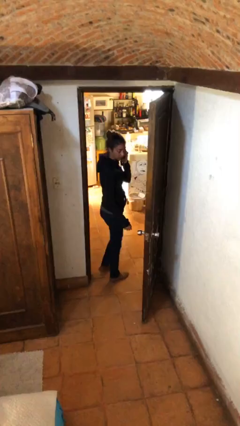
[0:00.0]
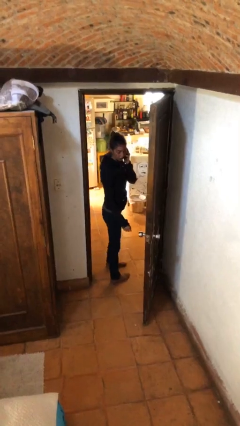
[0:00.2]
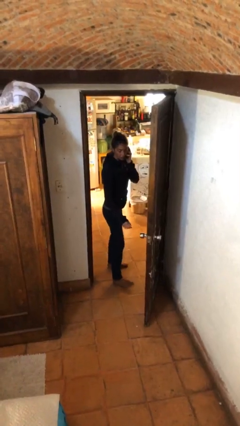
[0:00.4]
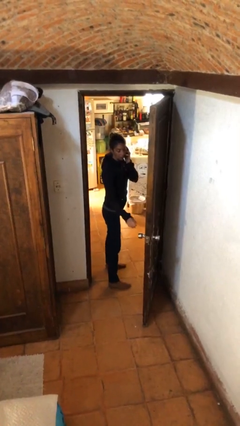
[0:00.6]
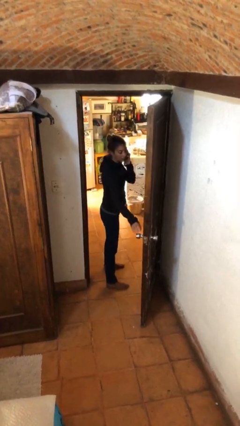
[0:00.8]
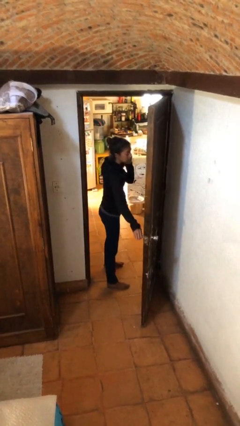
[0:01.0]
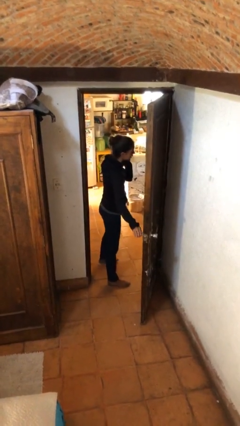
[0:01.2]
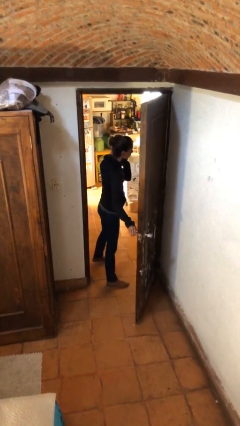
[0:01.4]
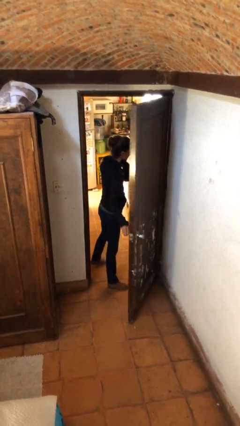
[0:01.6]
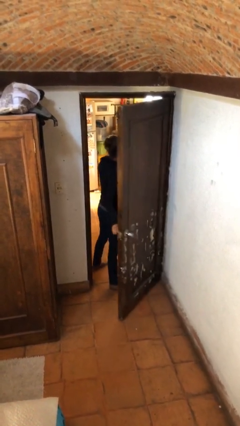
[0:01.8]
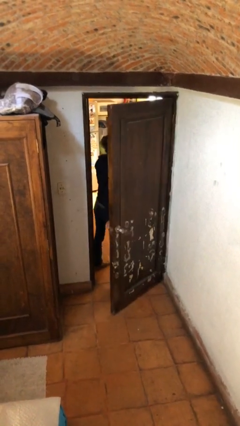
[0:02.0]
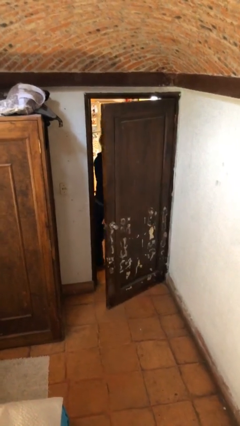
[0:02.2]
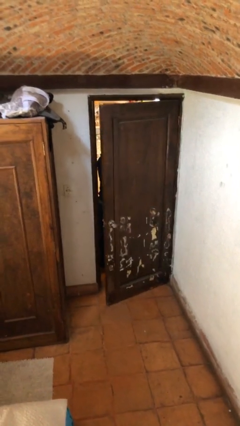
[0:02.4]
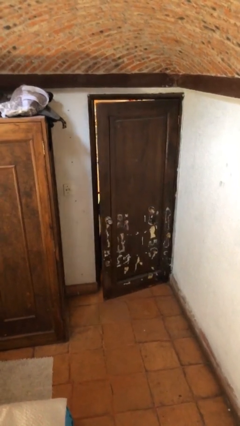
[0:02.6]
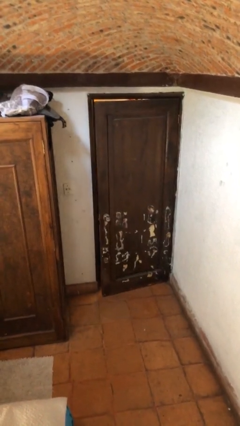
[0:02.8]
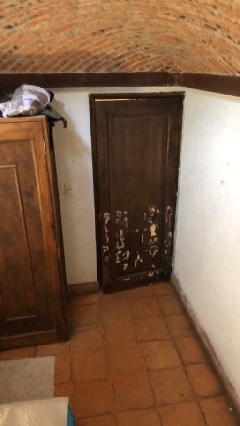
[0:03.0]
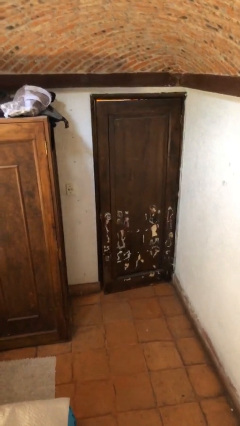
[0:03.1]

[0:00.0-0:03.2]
person closes facility door

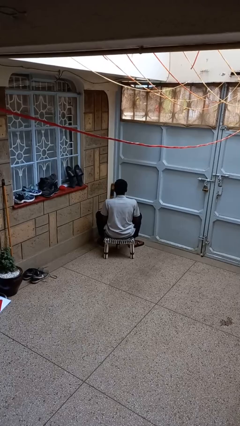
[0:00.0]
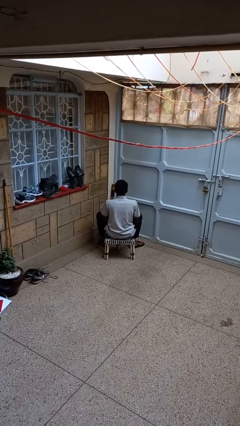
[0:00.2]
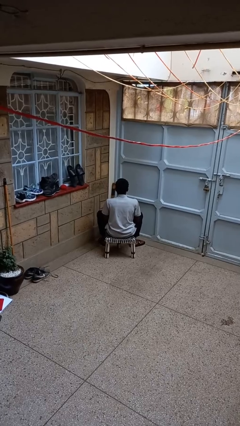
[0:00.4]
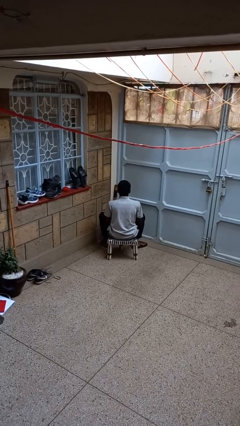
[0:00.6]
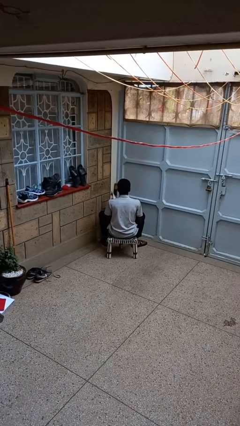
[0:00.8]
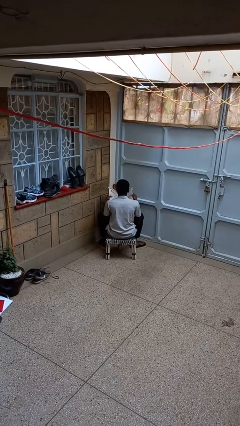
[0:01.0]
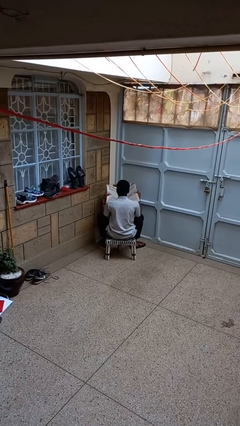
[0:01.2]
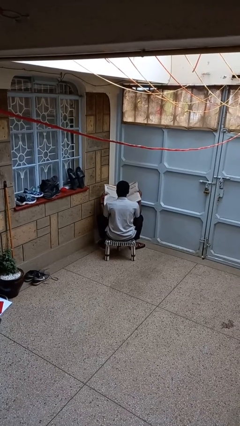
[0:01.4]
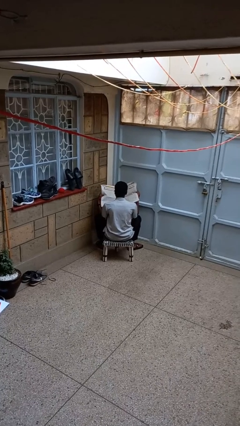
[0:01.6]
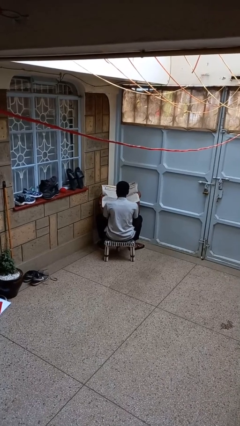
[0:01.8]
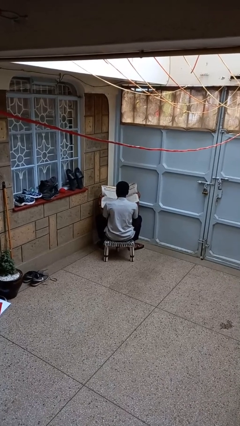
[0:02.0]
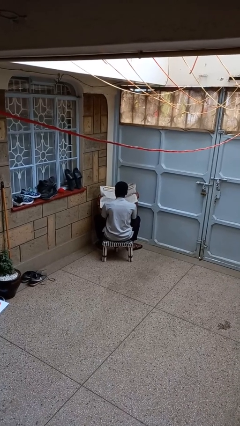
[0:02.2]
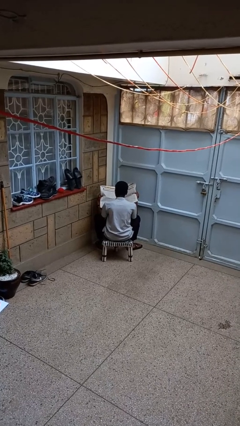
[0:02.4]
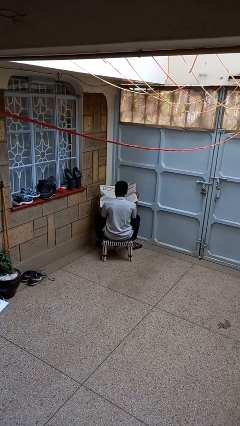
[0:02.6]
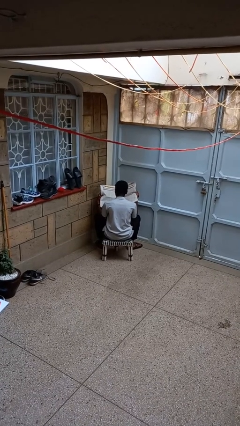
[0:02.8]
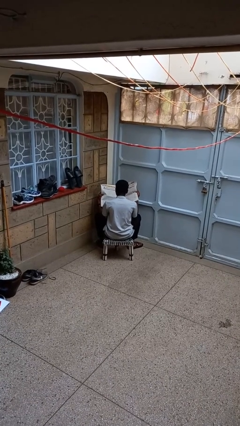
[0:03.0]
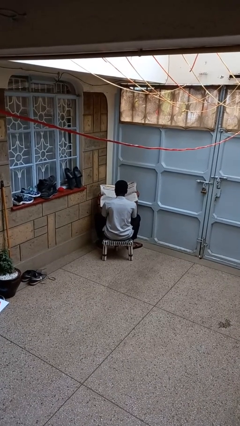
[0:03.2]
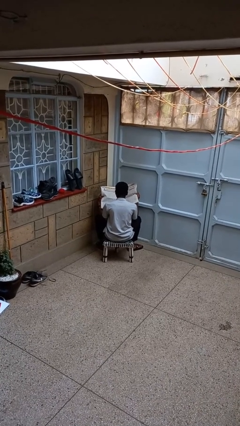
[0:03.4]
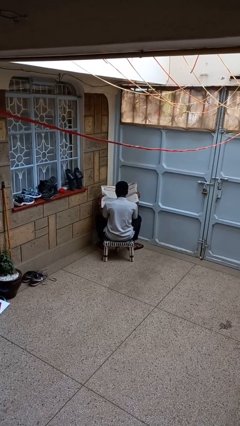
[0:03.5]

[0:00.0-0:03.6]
person reads newspaper

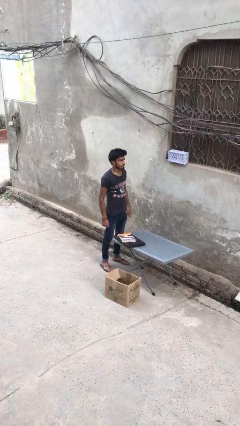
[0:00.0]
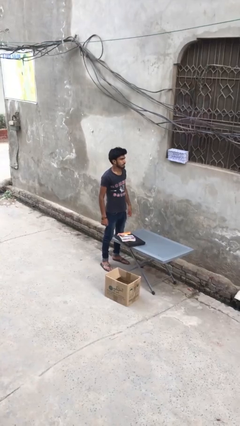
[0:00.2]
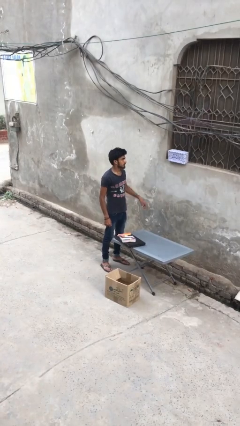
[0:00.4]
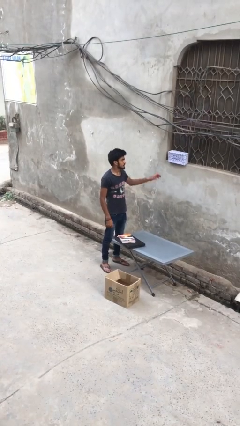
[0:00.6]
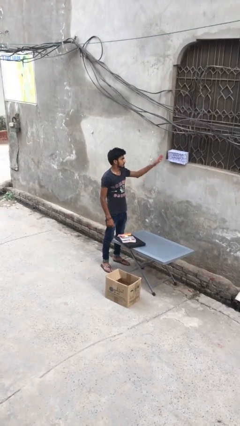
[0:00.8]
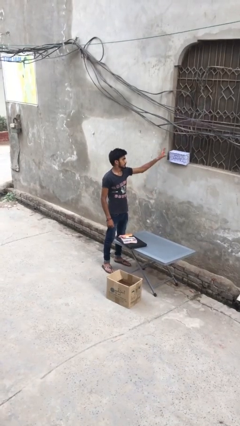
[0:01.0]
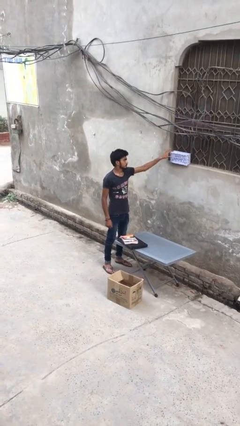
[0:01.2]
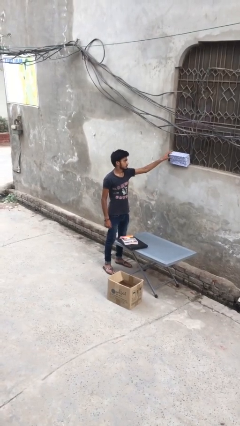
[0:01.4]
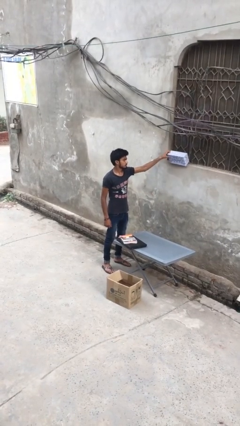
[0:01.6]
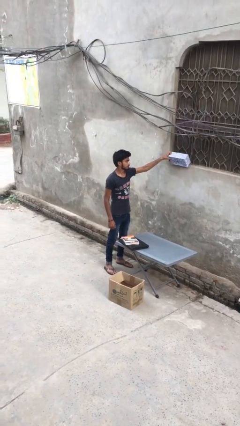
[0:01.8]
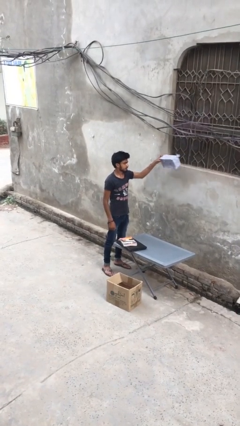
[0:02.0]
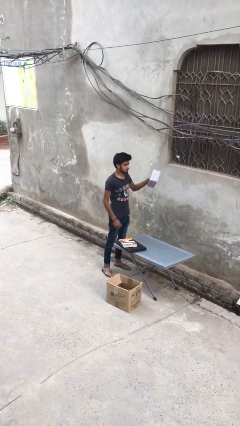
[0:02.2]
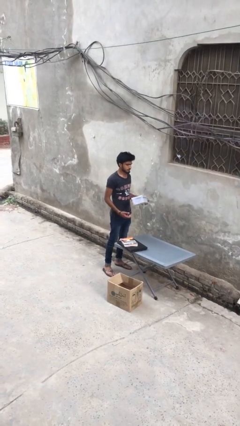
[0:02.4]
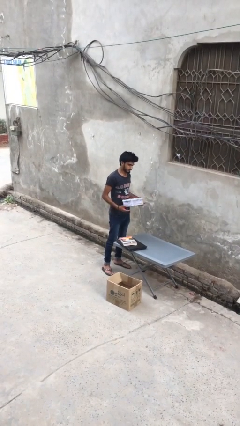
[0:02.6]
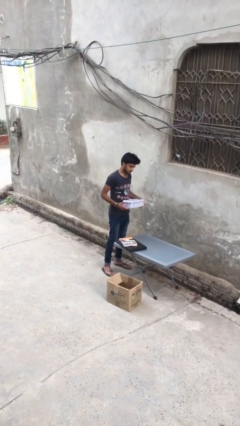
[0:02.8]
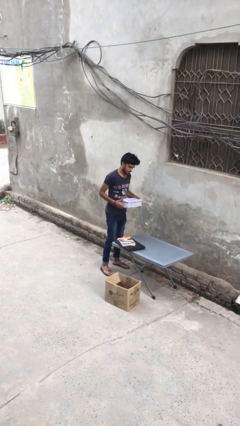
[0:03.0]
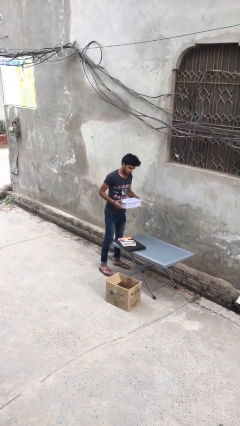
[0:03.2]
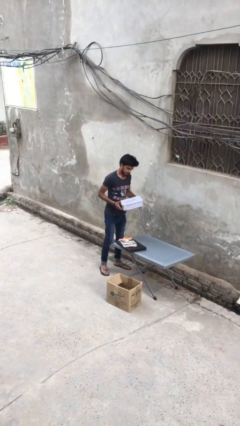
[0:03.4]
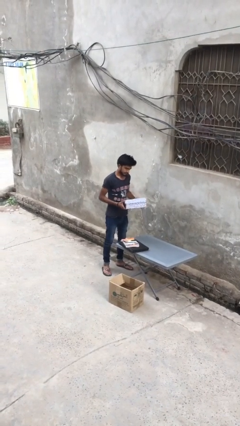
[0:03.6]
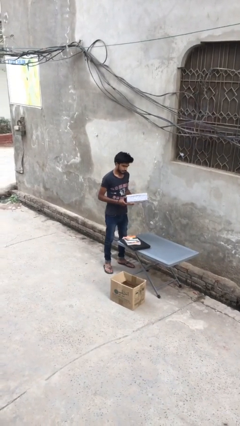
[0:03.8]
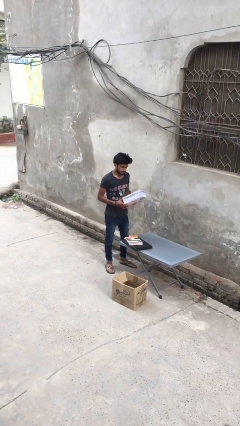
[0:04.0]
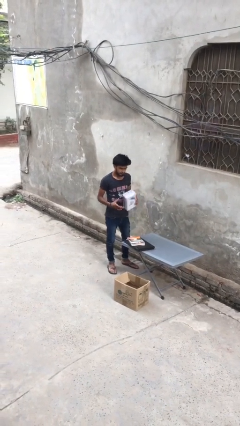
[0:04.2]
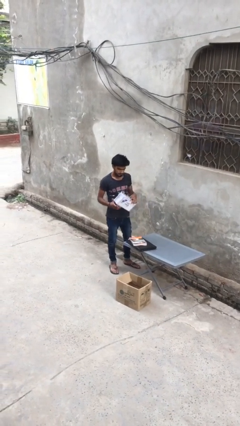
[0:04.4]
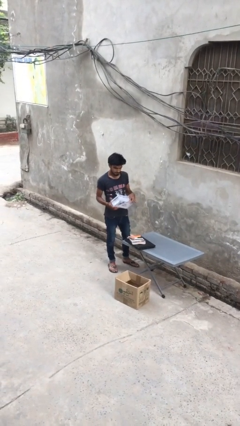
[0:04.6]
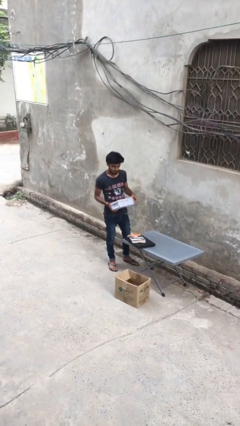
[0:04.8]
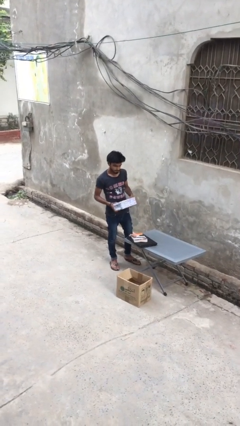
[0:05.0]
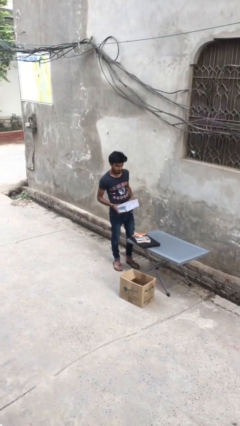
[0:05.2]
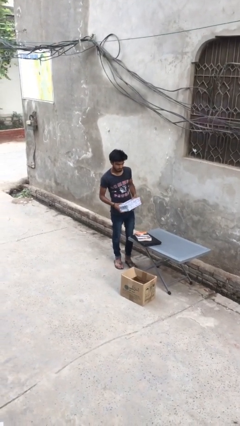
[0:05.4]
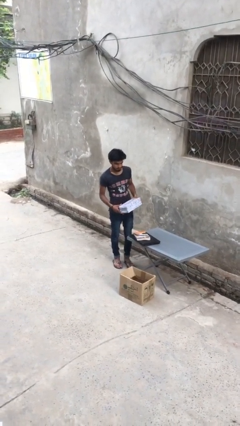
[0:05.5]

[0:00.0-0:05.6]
person picks up object from shelf

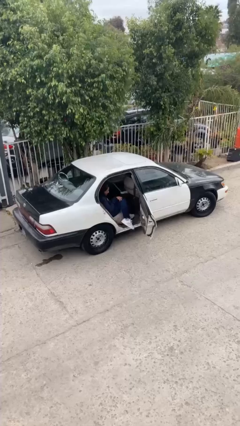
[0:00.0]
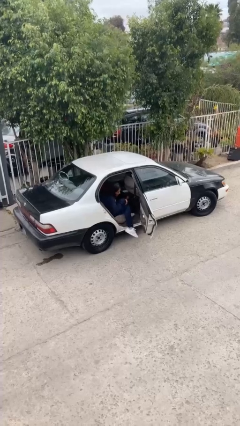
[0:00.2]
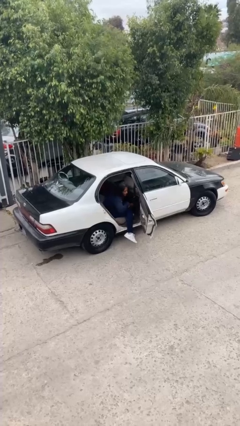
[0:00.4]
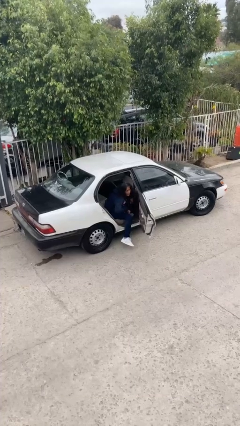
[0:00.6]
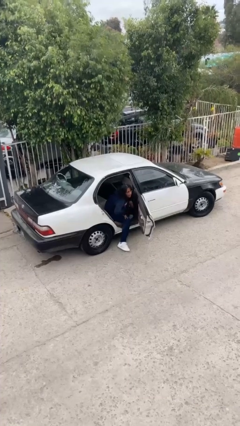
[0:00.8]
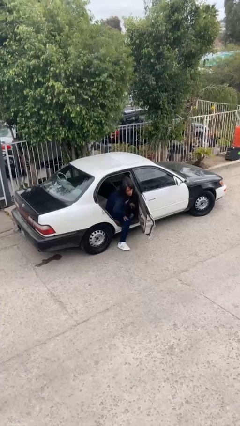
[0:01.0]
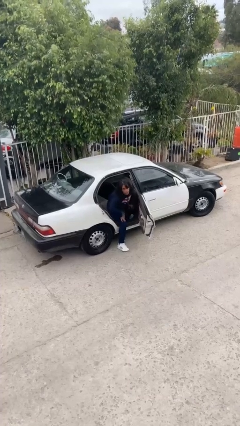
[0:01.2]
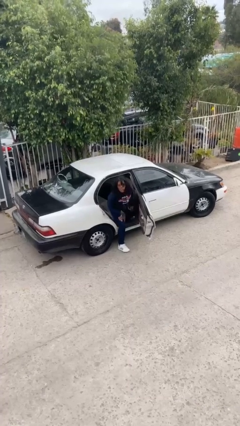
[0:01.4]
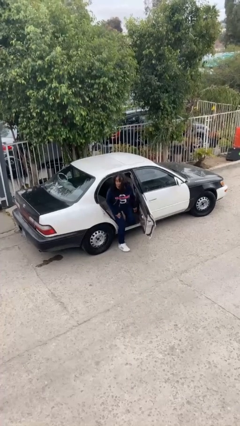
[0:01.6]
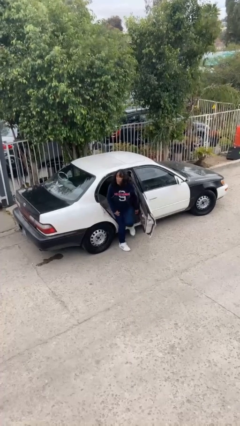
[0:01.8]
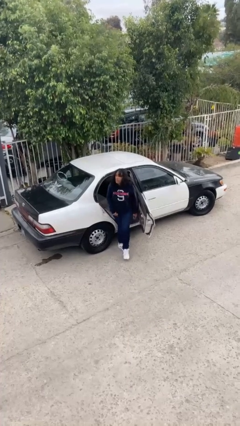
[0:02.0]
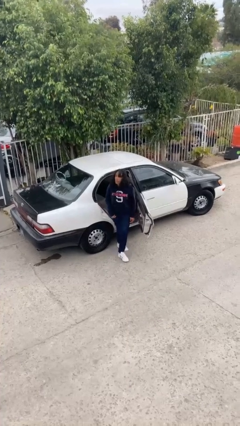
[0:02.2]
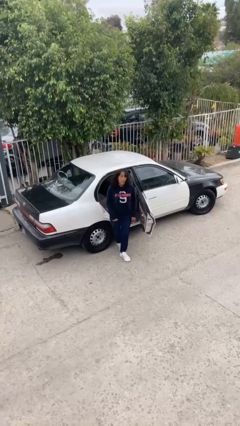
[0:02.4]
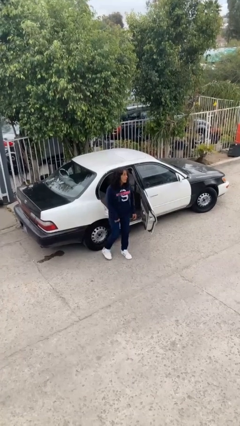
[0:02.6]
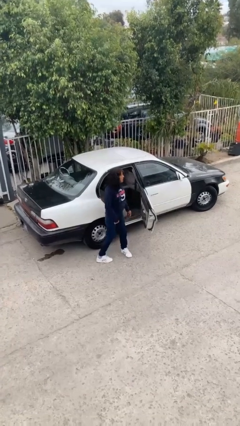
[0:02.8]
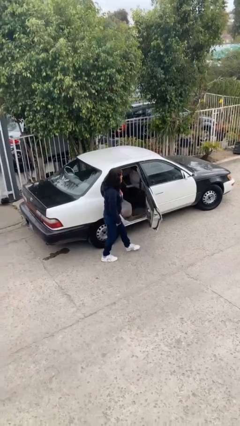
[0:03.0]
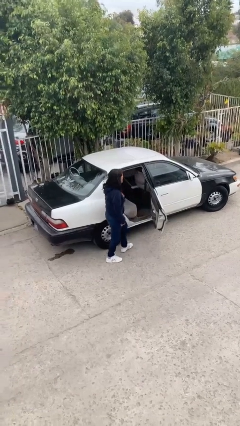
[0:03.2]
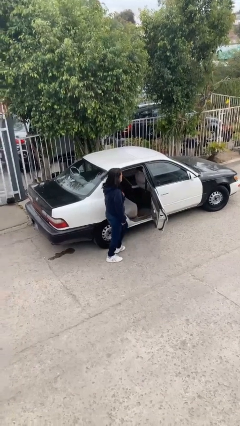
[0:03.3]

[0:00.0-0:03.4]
person exits car

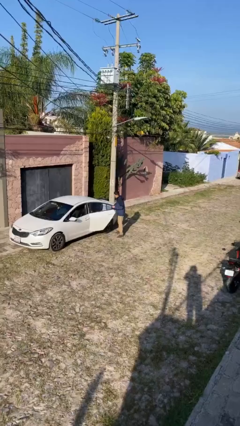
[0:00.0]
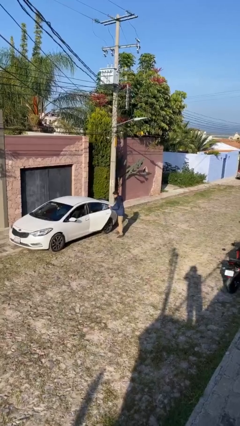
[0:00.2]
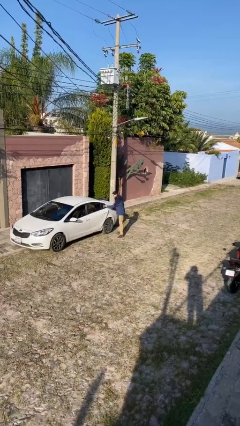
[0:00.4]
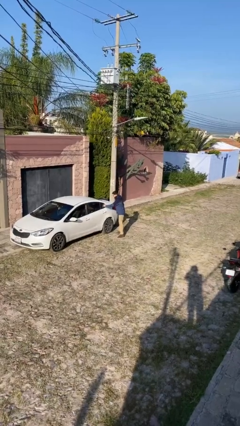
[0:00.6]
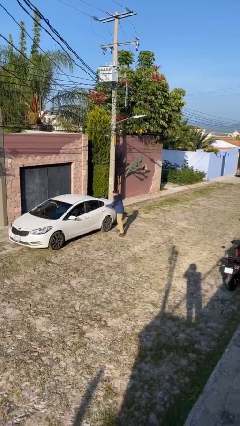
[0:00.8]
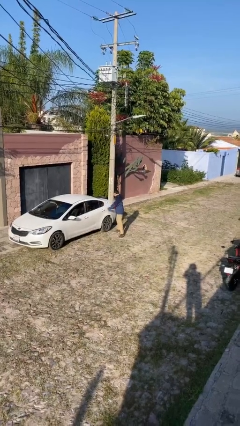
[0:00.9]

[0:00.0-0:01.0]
person closes car door

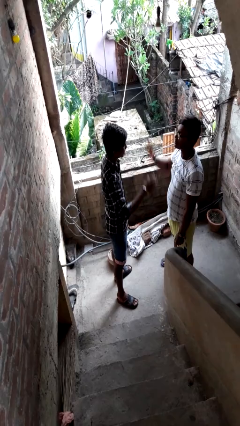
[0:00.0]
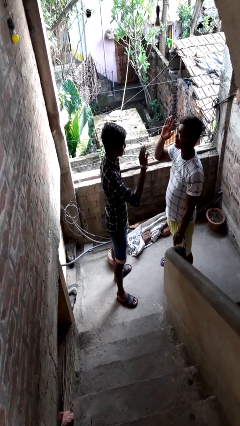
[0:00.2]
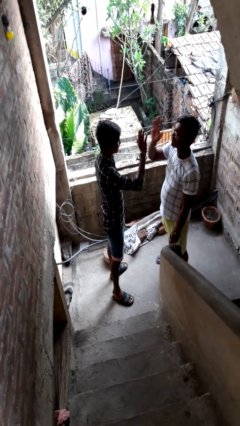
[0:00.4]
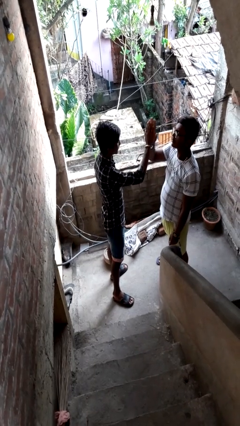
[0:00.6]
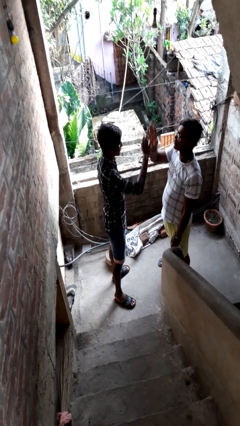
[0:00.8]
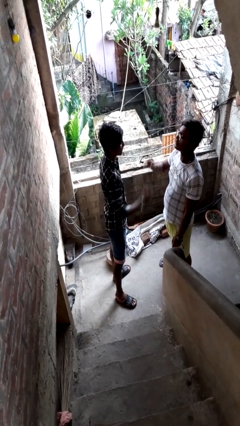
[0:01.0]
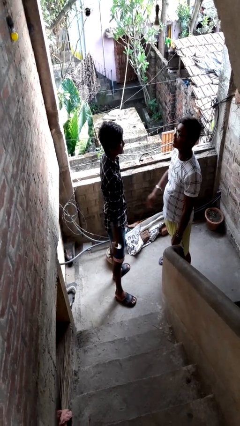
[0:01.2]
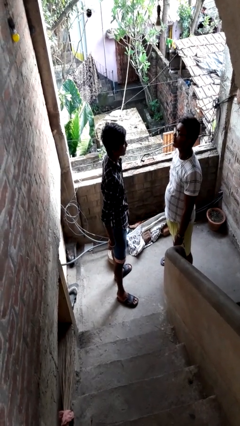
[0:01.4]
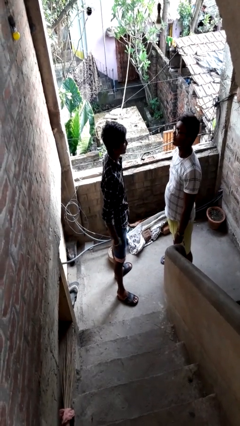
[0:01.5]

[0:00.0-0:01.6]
person highfives hand
